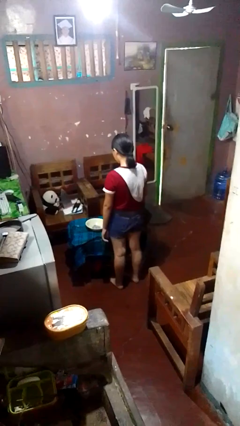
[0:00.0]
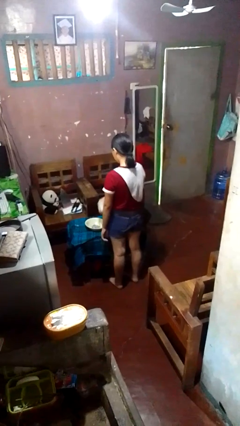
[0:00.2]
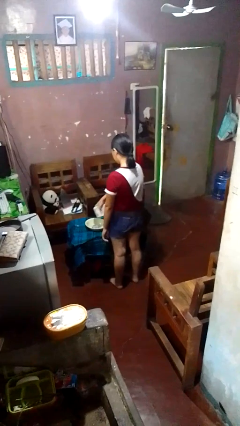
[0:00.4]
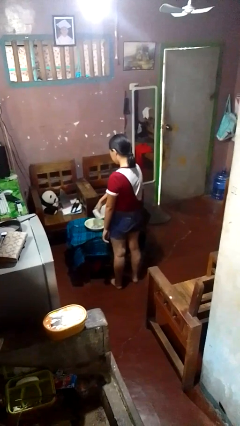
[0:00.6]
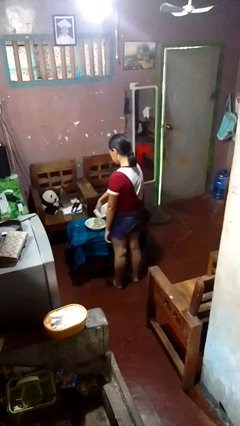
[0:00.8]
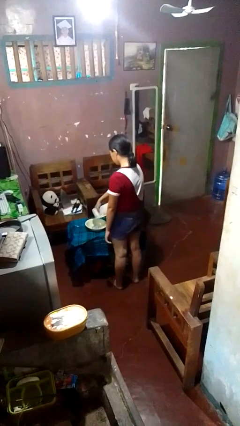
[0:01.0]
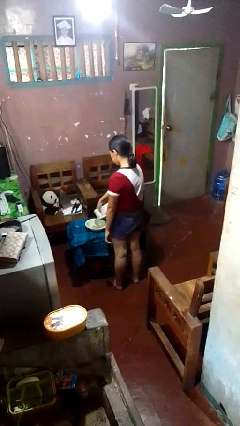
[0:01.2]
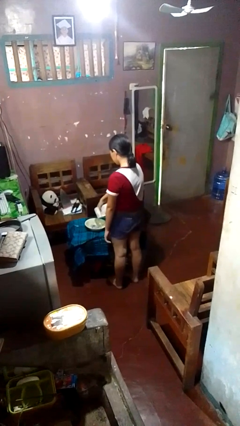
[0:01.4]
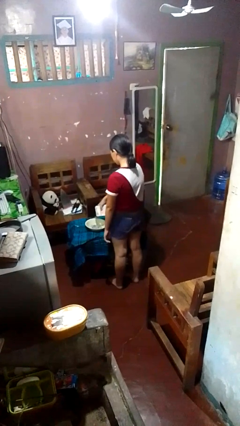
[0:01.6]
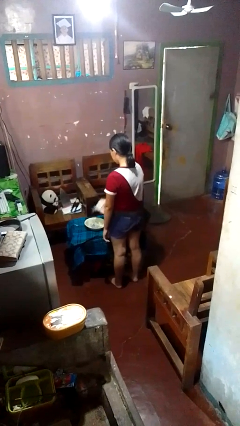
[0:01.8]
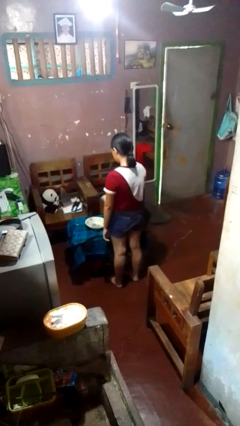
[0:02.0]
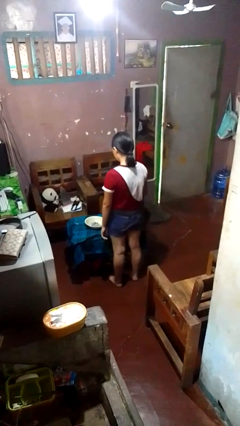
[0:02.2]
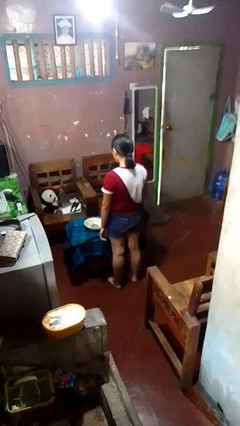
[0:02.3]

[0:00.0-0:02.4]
person pours into bowl

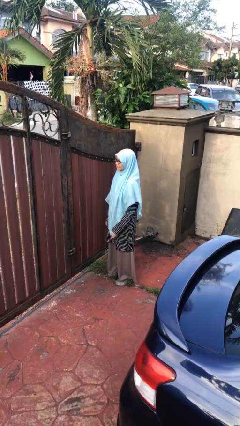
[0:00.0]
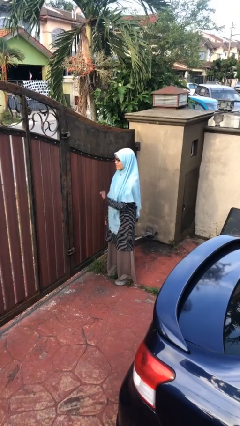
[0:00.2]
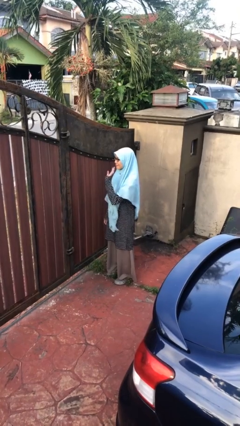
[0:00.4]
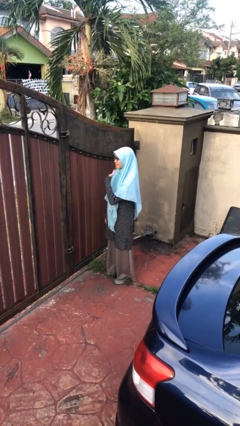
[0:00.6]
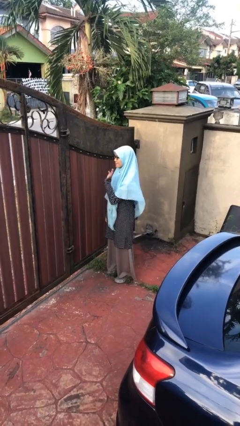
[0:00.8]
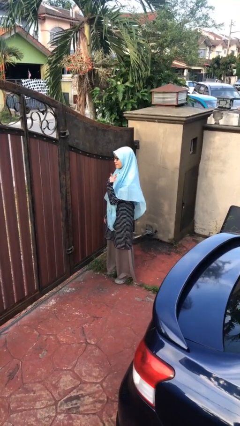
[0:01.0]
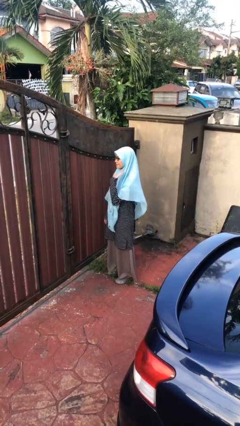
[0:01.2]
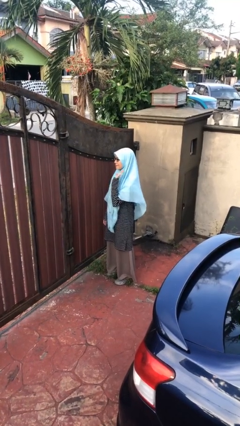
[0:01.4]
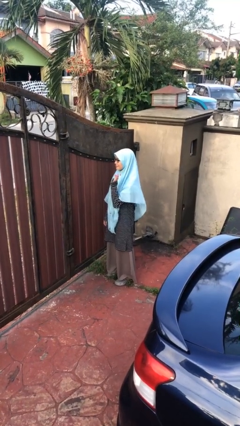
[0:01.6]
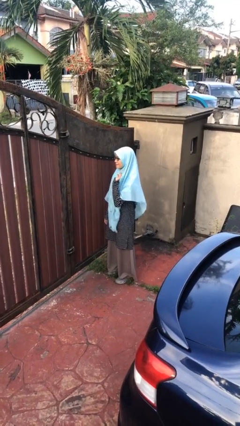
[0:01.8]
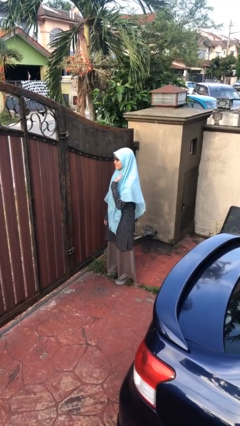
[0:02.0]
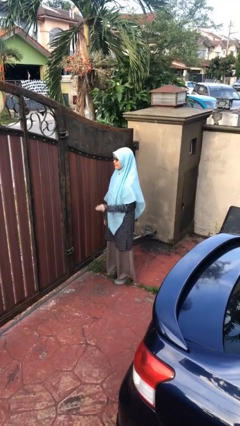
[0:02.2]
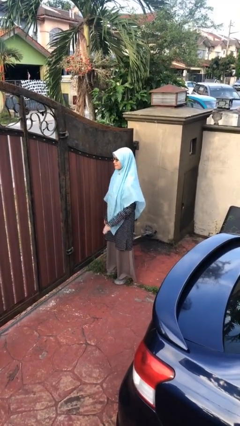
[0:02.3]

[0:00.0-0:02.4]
person waves at person

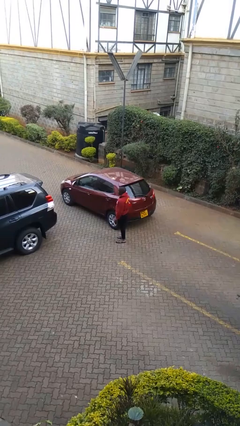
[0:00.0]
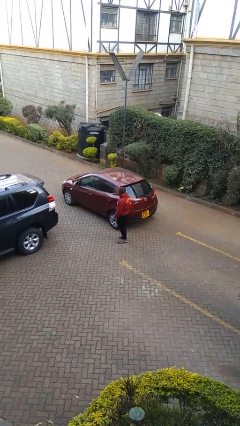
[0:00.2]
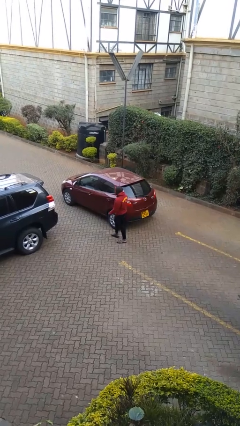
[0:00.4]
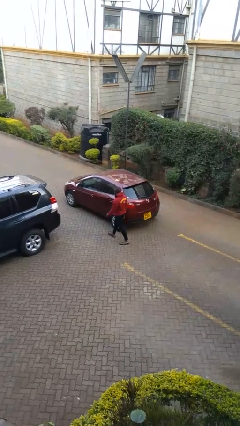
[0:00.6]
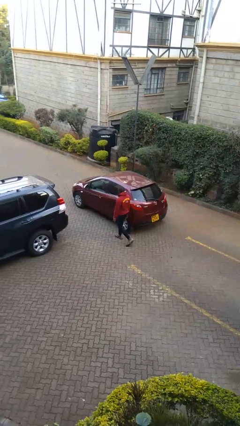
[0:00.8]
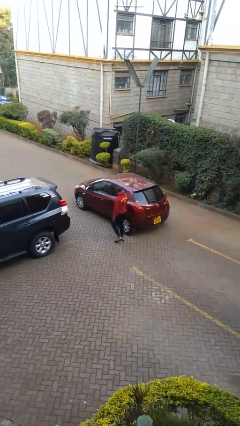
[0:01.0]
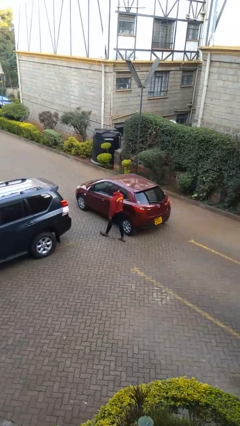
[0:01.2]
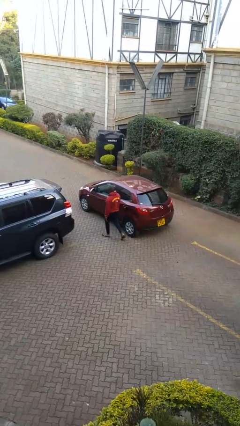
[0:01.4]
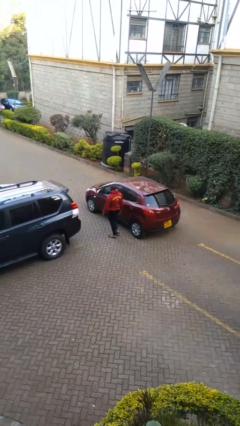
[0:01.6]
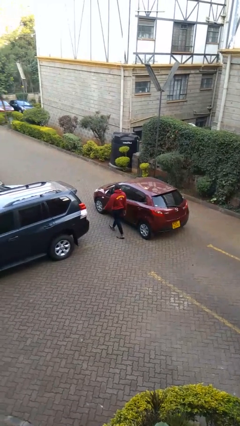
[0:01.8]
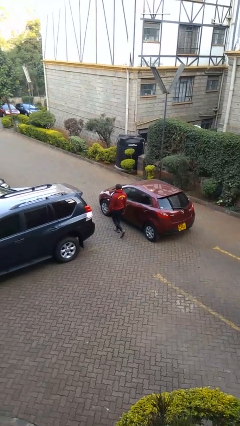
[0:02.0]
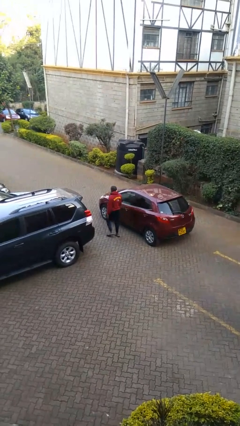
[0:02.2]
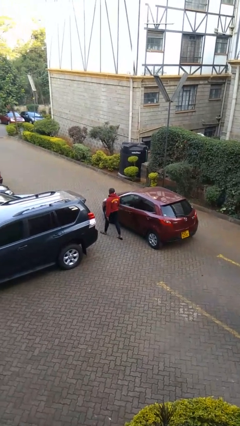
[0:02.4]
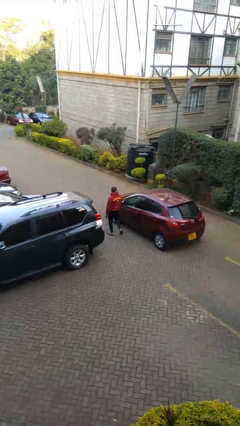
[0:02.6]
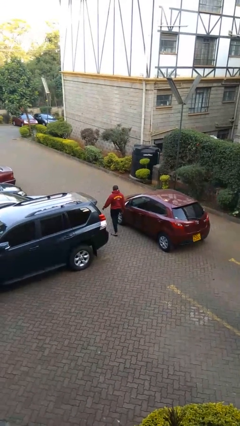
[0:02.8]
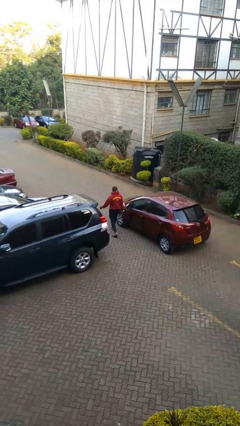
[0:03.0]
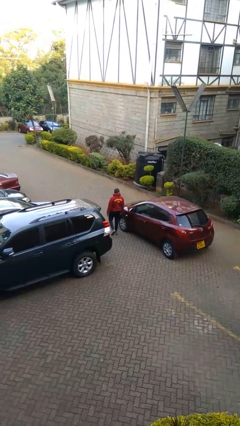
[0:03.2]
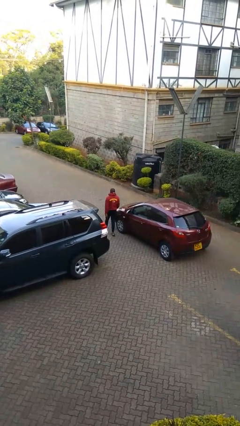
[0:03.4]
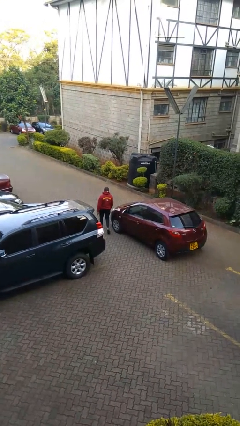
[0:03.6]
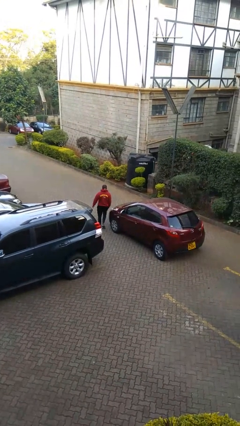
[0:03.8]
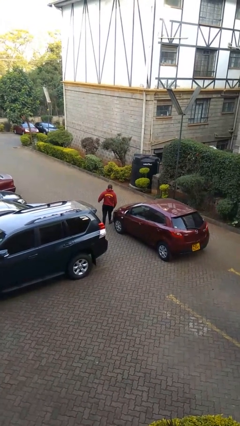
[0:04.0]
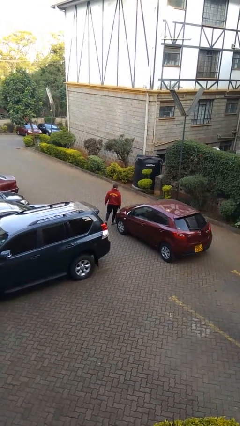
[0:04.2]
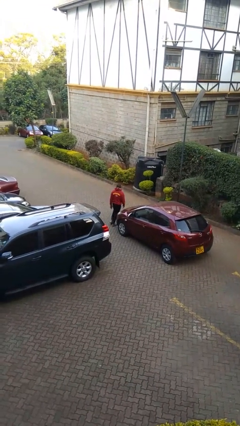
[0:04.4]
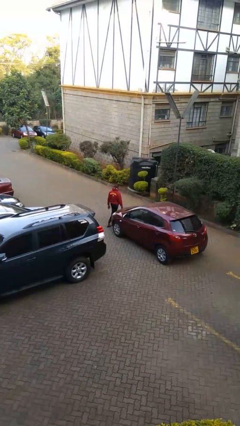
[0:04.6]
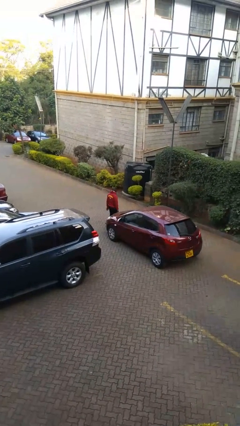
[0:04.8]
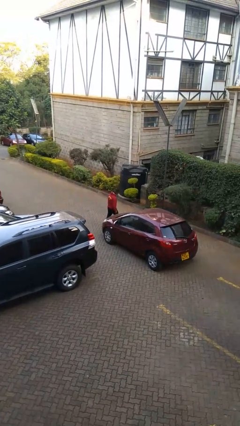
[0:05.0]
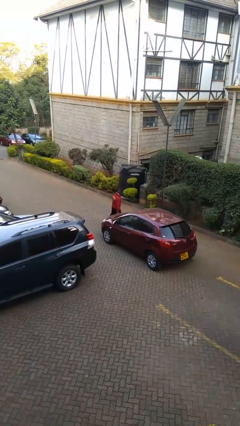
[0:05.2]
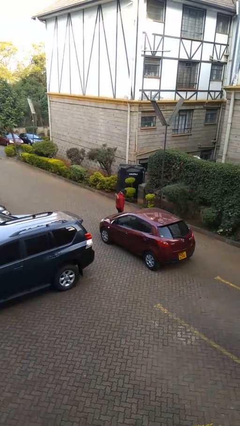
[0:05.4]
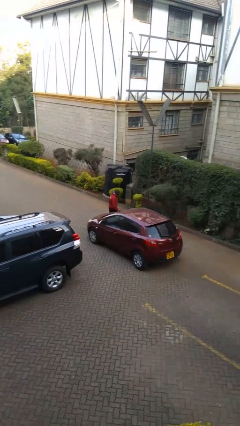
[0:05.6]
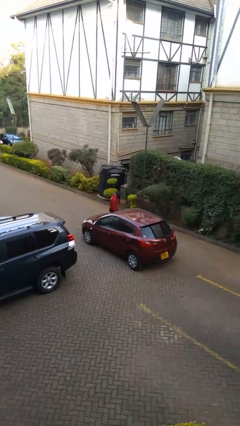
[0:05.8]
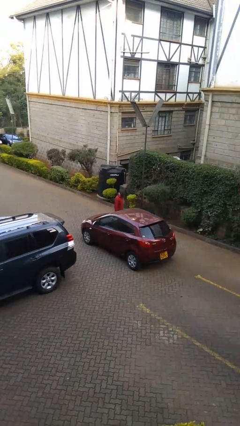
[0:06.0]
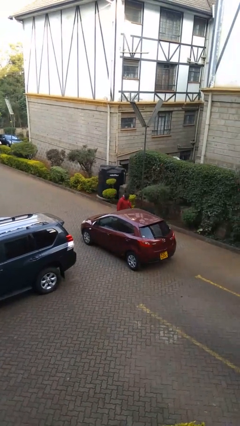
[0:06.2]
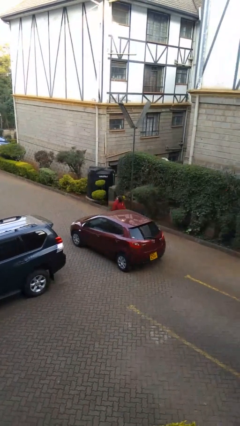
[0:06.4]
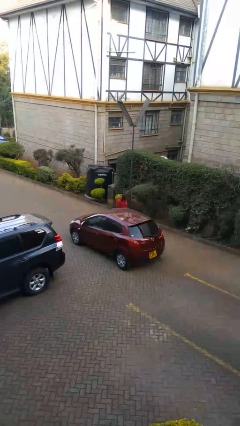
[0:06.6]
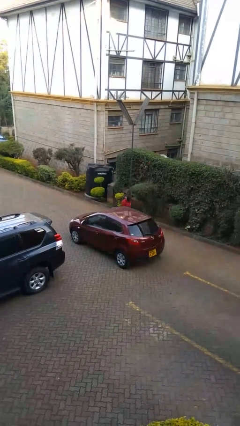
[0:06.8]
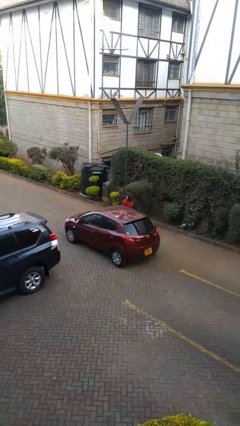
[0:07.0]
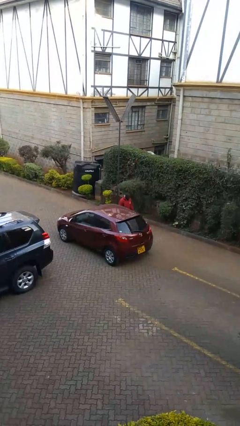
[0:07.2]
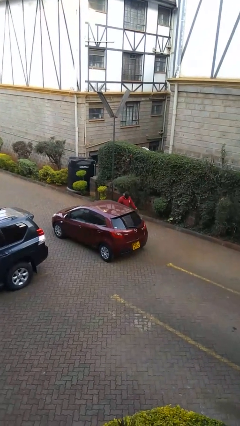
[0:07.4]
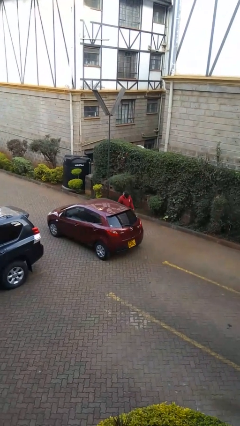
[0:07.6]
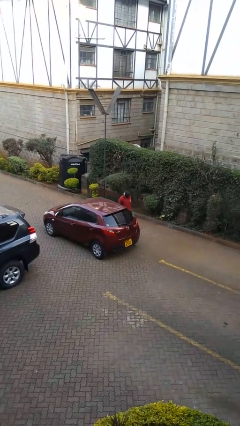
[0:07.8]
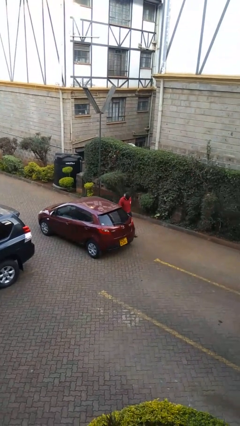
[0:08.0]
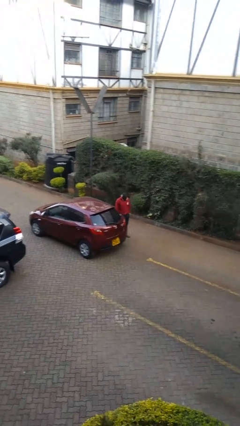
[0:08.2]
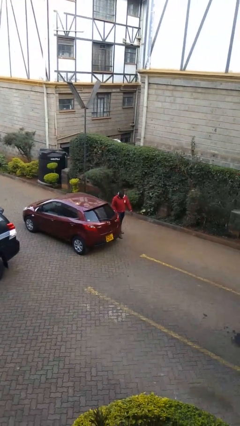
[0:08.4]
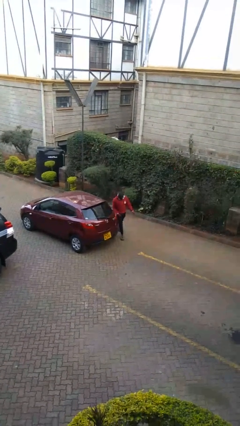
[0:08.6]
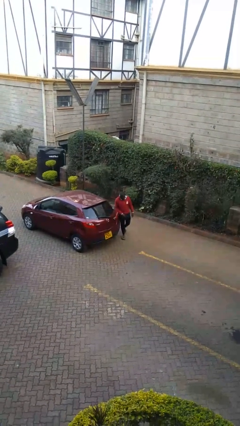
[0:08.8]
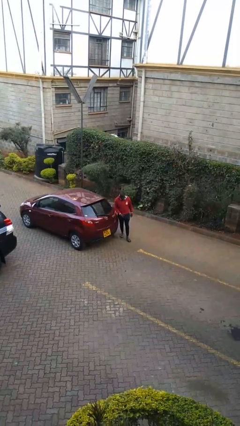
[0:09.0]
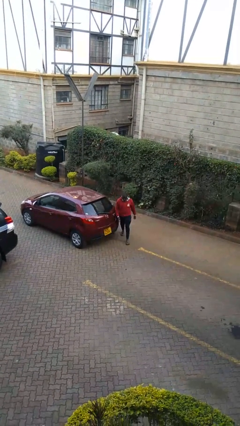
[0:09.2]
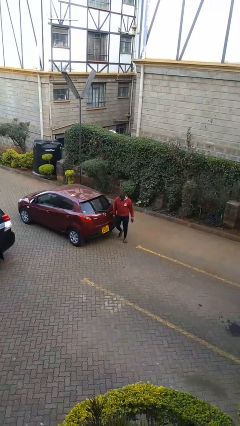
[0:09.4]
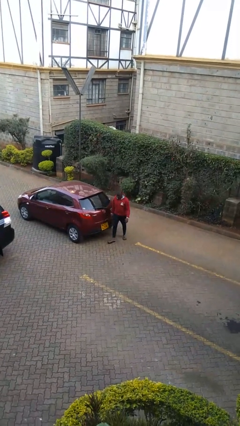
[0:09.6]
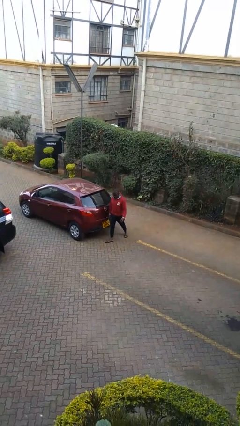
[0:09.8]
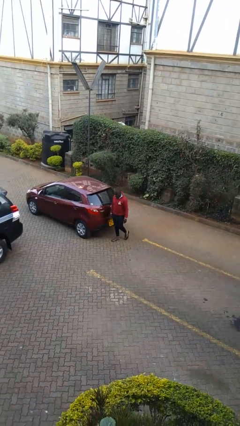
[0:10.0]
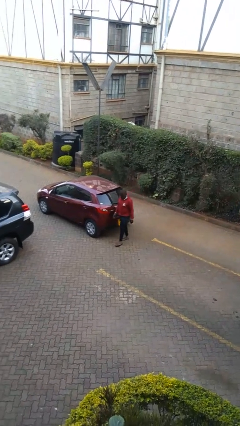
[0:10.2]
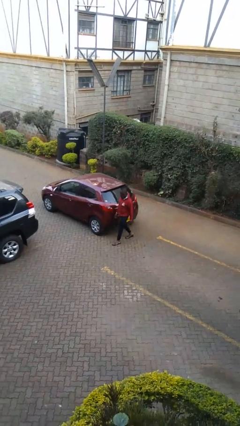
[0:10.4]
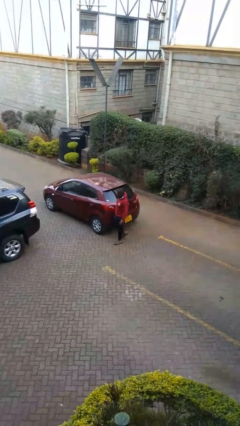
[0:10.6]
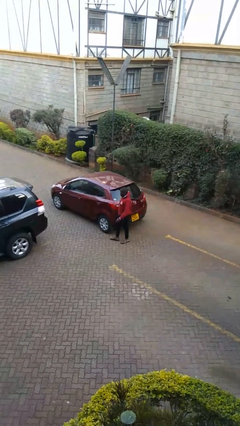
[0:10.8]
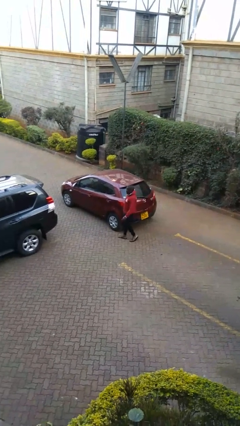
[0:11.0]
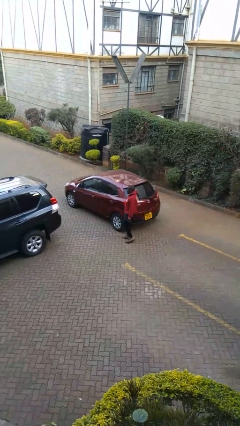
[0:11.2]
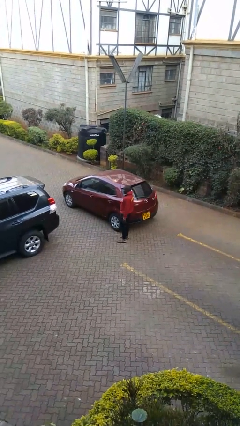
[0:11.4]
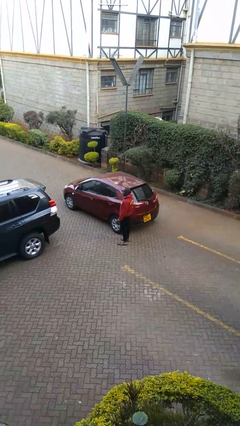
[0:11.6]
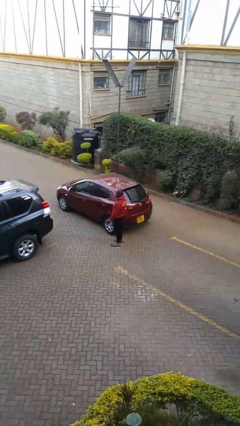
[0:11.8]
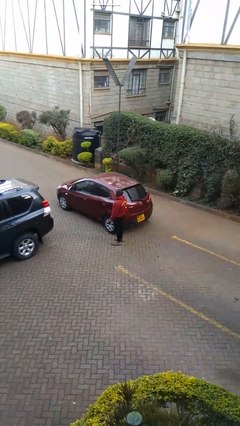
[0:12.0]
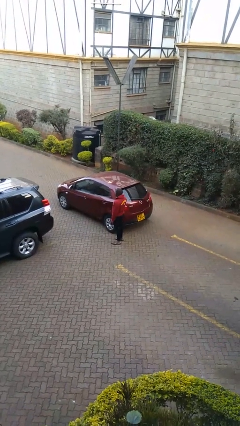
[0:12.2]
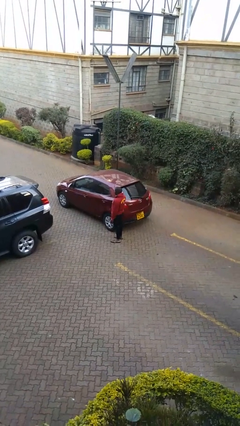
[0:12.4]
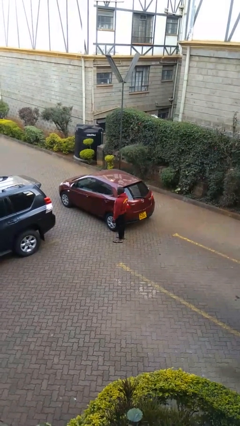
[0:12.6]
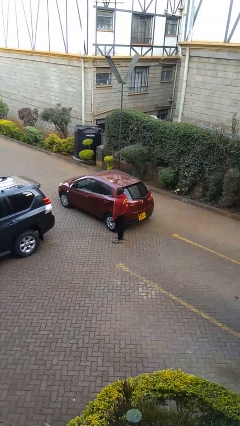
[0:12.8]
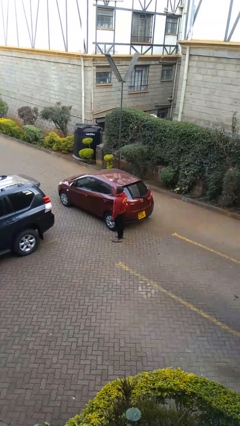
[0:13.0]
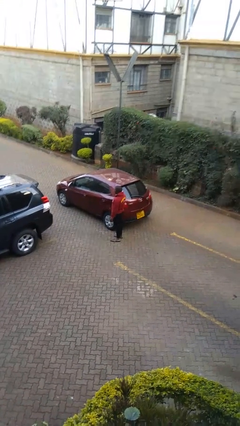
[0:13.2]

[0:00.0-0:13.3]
person walks around car
